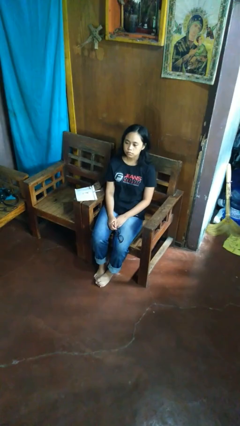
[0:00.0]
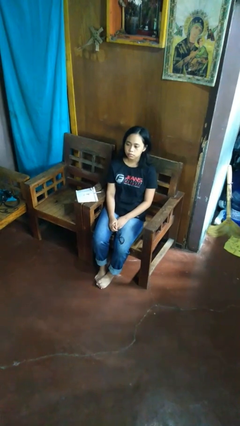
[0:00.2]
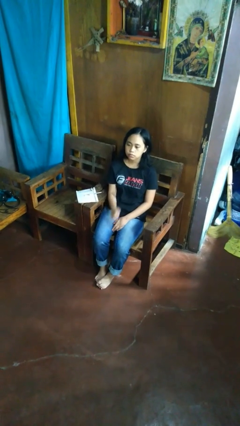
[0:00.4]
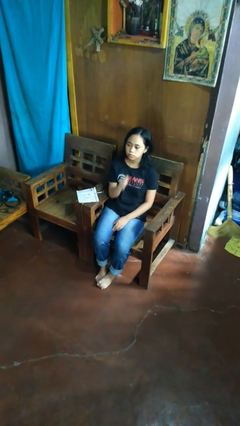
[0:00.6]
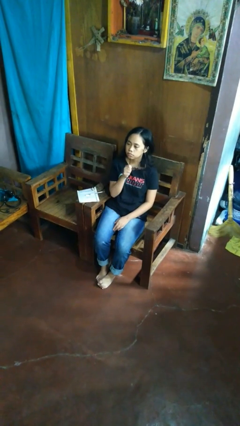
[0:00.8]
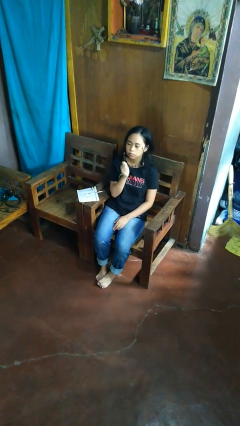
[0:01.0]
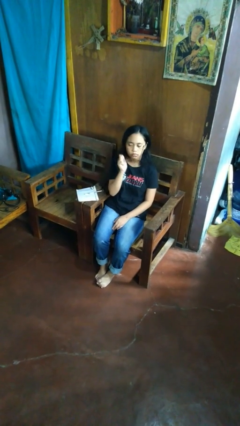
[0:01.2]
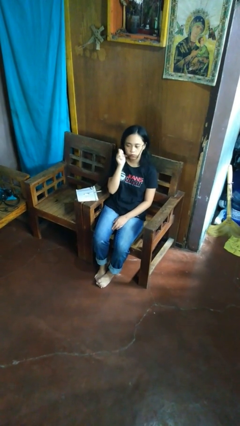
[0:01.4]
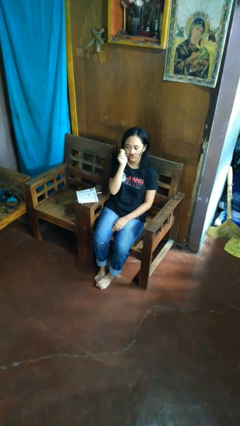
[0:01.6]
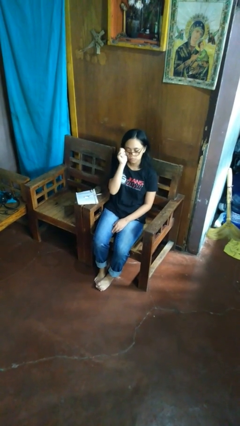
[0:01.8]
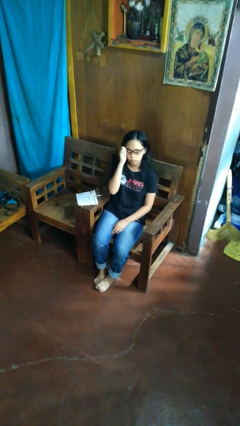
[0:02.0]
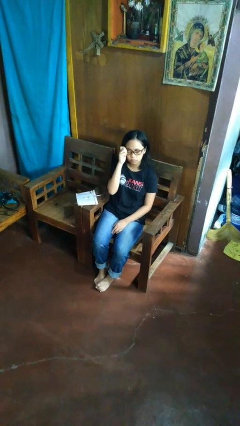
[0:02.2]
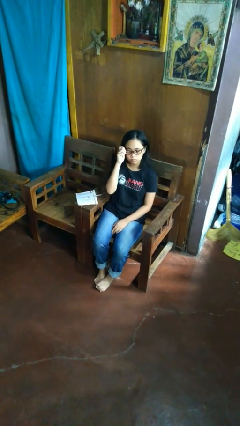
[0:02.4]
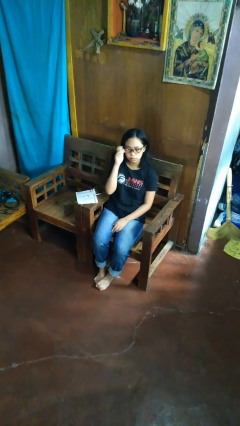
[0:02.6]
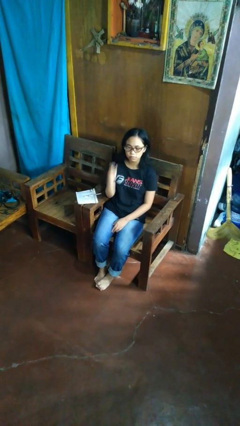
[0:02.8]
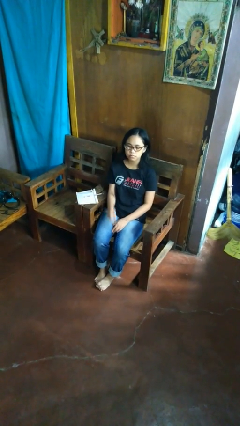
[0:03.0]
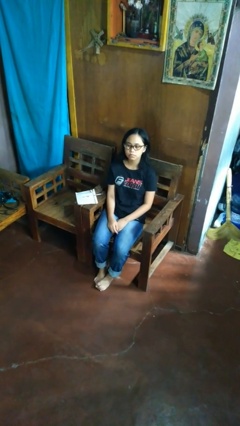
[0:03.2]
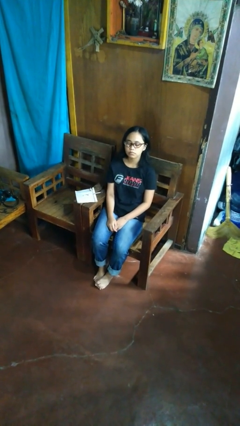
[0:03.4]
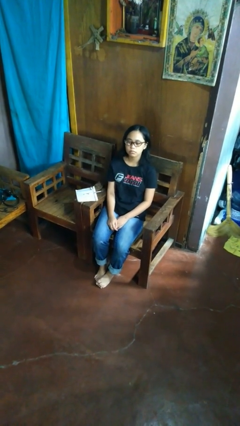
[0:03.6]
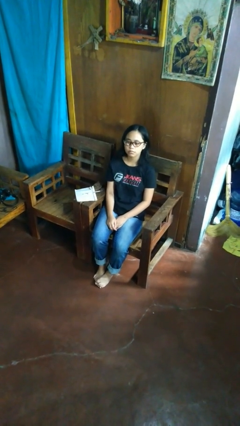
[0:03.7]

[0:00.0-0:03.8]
person puts on glasses

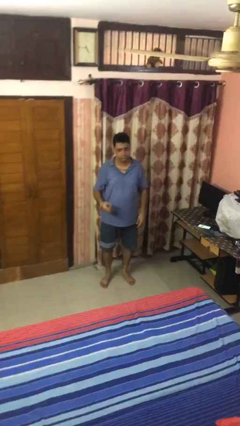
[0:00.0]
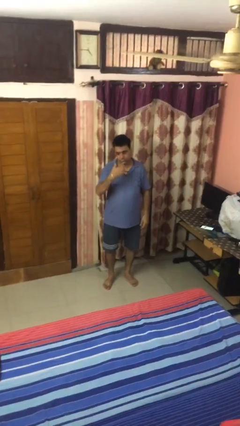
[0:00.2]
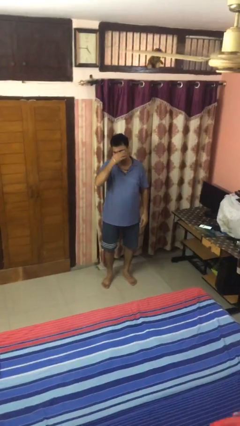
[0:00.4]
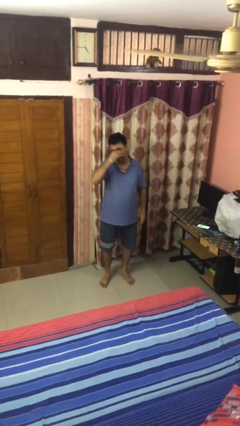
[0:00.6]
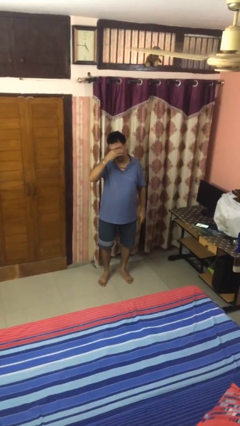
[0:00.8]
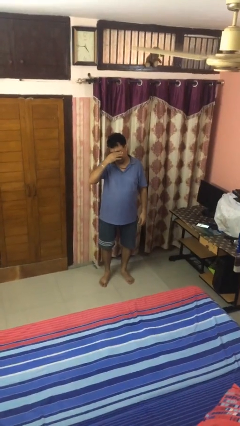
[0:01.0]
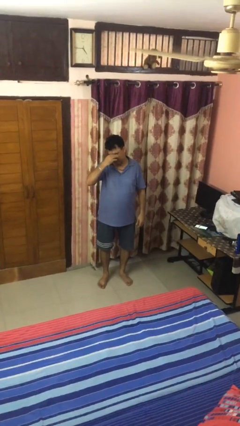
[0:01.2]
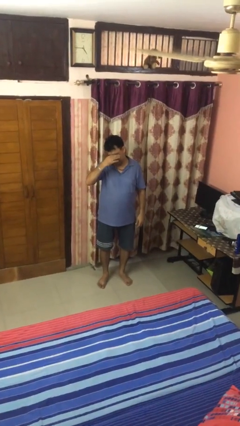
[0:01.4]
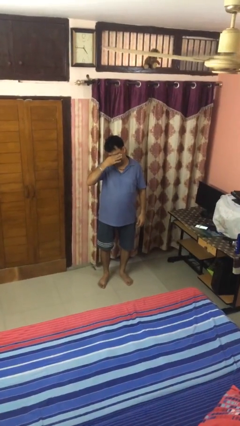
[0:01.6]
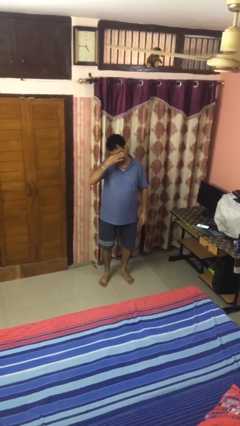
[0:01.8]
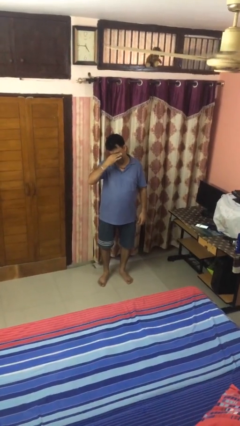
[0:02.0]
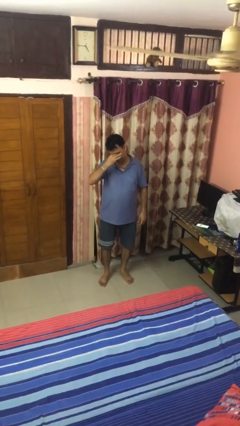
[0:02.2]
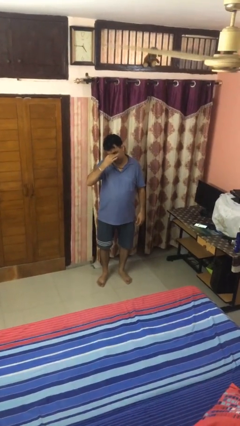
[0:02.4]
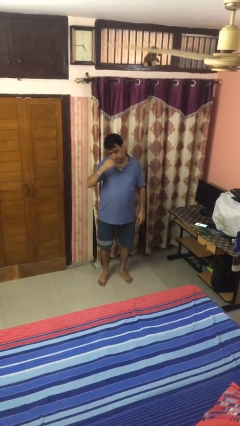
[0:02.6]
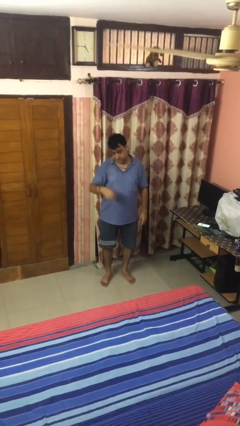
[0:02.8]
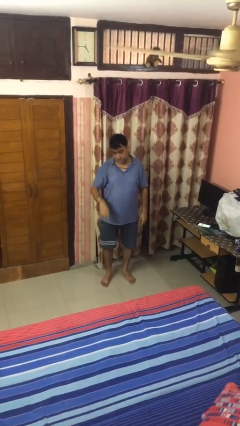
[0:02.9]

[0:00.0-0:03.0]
person rubs eyes

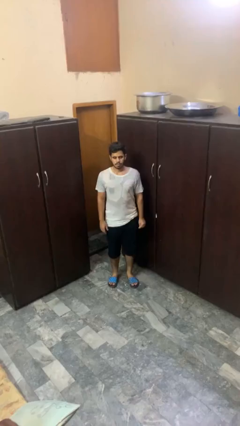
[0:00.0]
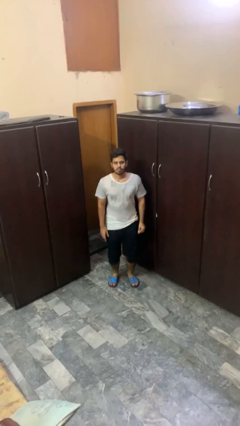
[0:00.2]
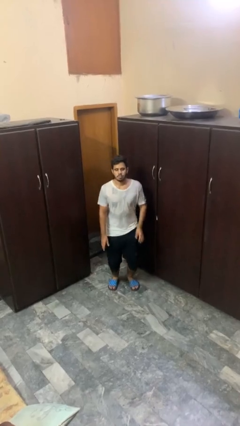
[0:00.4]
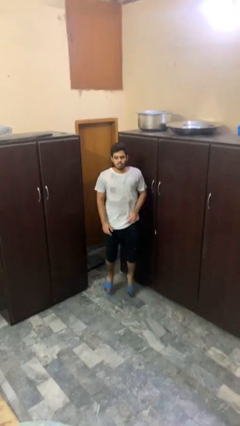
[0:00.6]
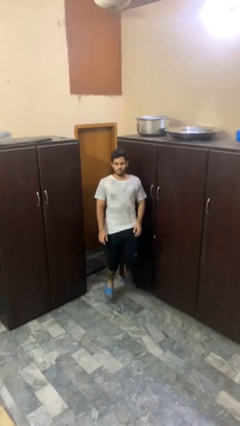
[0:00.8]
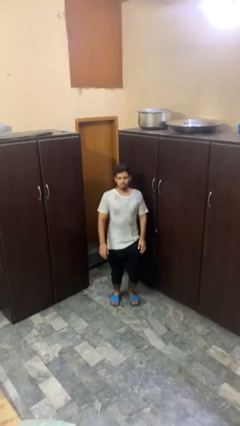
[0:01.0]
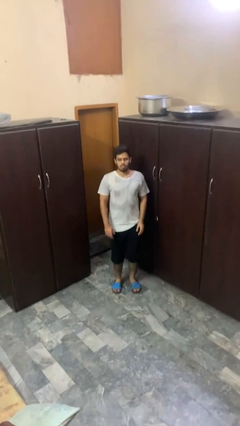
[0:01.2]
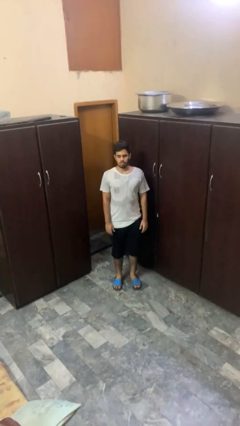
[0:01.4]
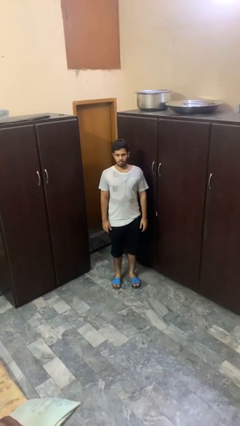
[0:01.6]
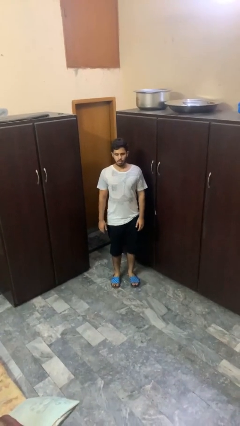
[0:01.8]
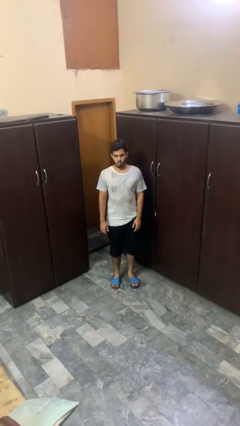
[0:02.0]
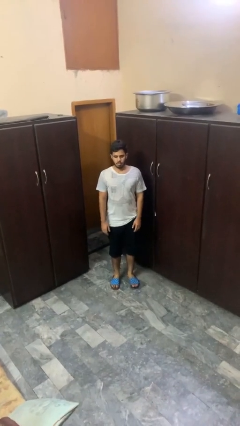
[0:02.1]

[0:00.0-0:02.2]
person jumps

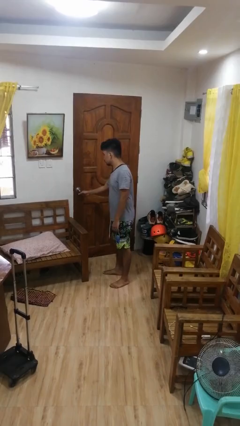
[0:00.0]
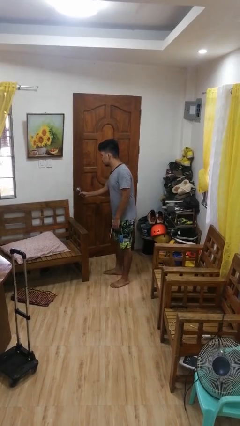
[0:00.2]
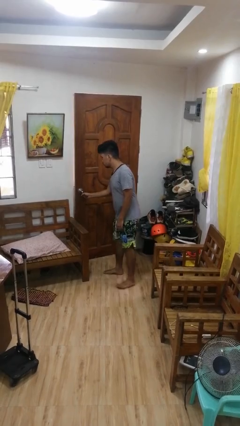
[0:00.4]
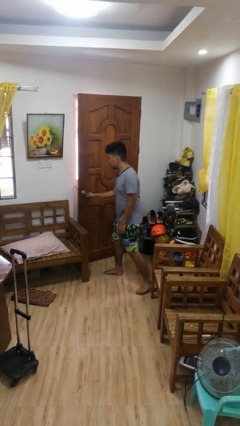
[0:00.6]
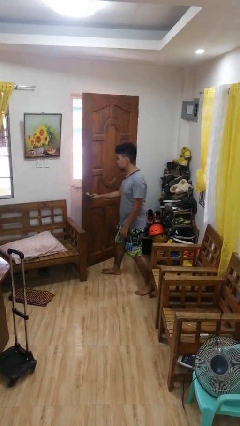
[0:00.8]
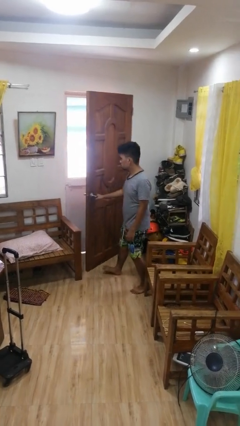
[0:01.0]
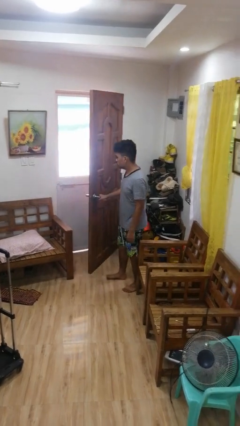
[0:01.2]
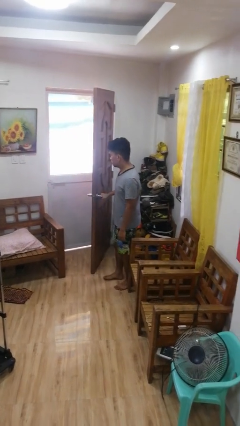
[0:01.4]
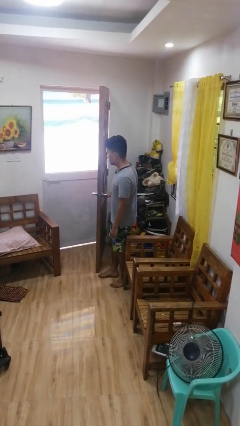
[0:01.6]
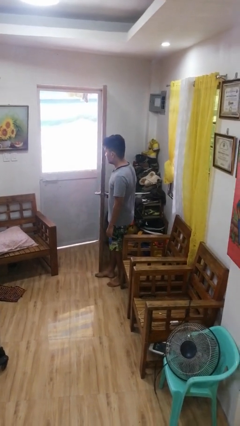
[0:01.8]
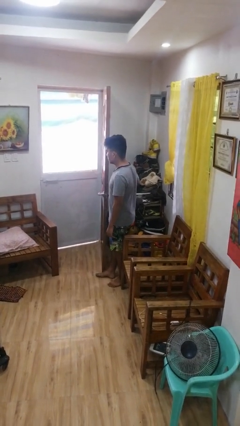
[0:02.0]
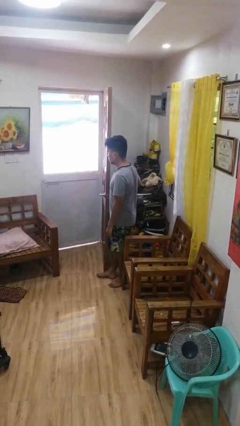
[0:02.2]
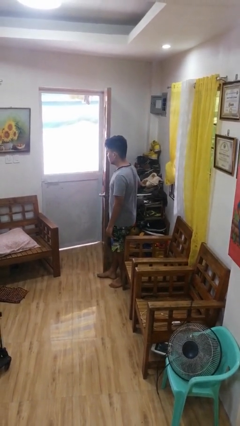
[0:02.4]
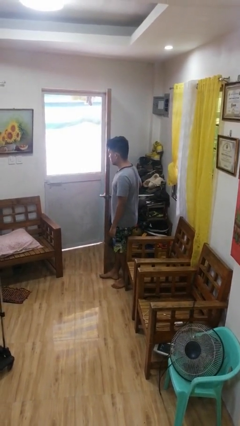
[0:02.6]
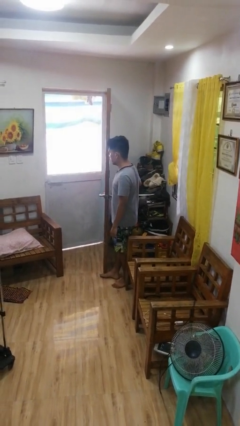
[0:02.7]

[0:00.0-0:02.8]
person opens facility door

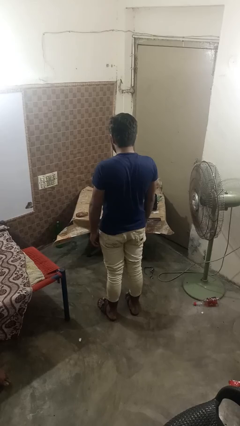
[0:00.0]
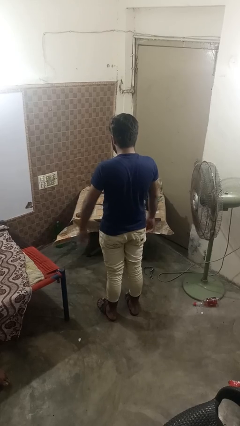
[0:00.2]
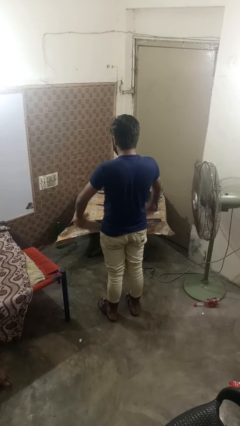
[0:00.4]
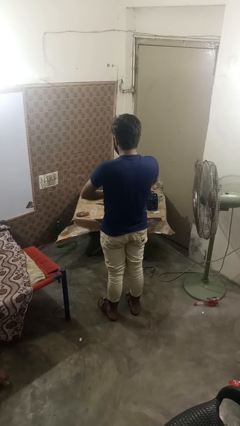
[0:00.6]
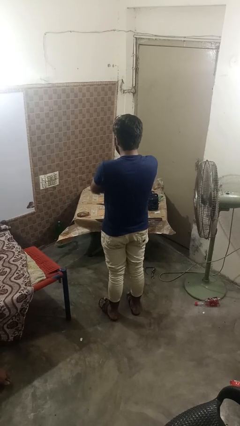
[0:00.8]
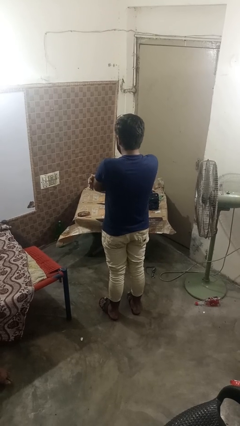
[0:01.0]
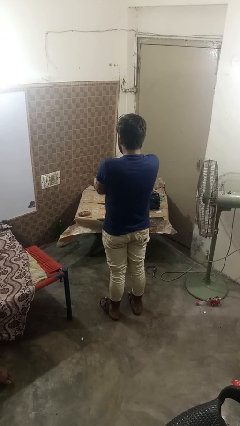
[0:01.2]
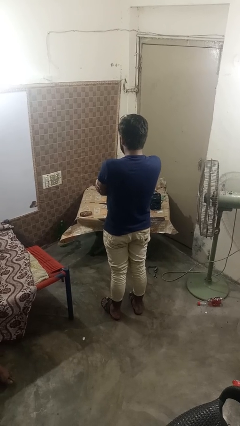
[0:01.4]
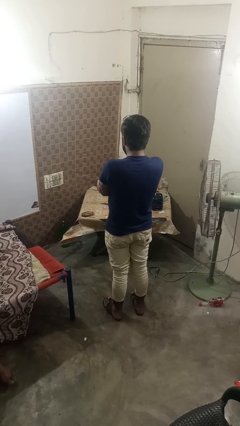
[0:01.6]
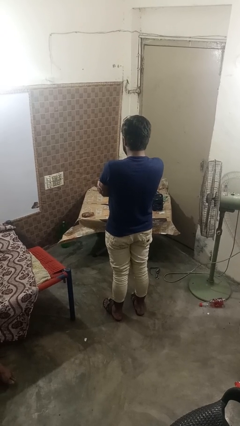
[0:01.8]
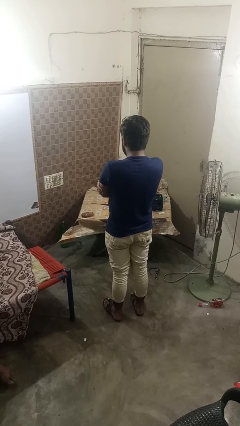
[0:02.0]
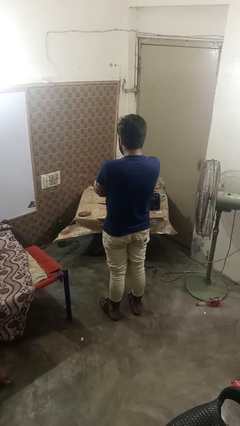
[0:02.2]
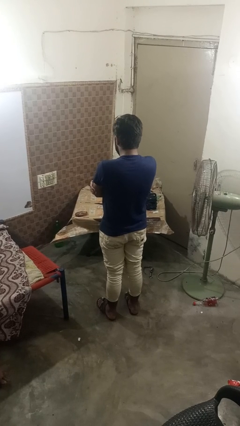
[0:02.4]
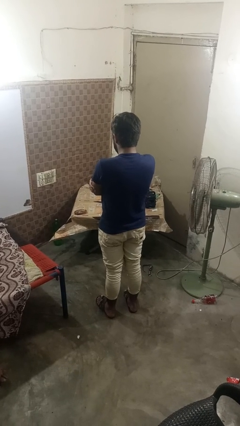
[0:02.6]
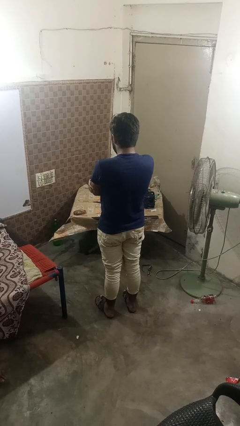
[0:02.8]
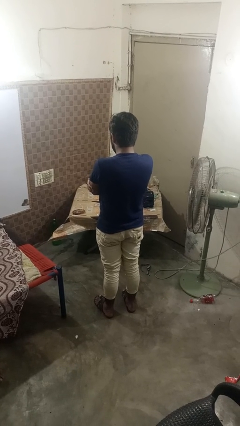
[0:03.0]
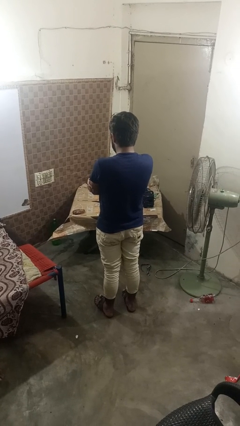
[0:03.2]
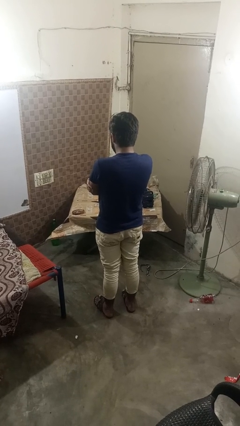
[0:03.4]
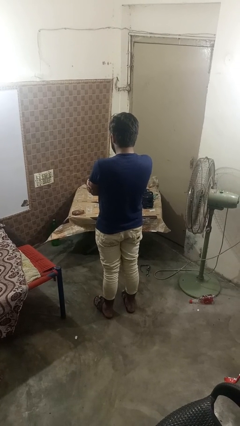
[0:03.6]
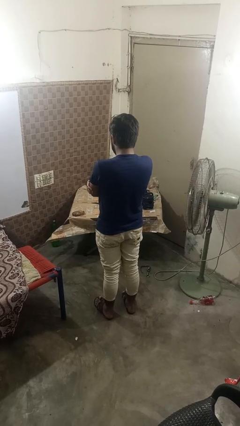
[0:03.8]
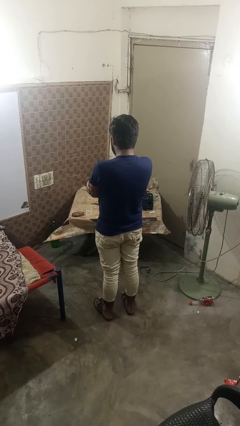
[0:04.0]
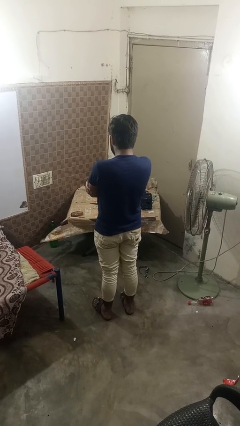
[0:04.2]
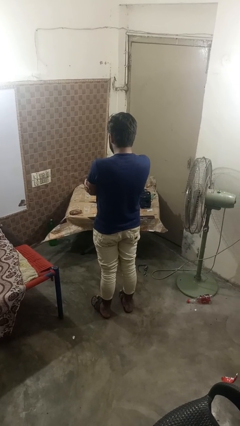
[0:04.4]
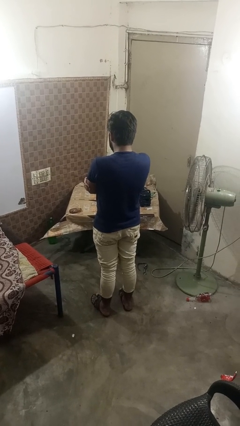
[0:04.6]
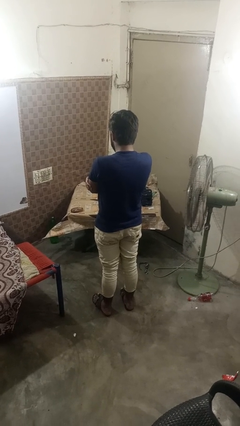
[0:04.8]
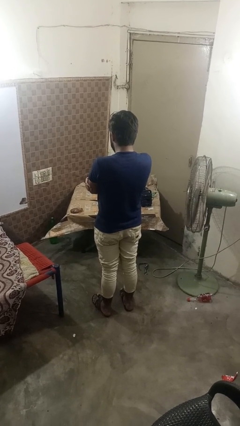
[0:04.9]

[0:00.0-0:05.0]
person crosses arms

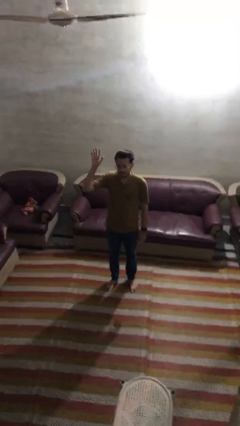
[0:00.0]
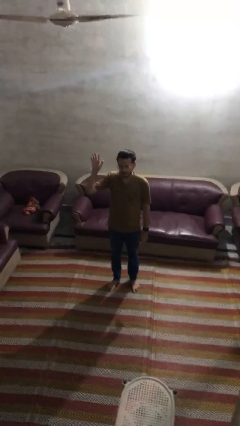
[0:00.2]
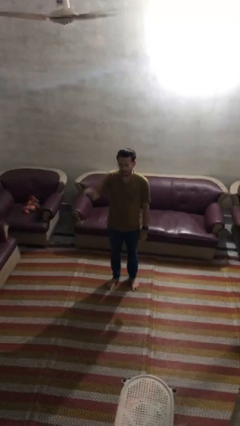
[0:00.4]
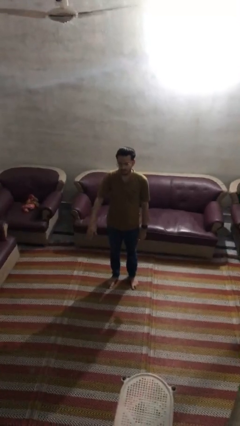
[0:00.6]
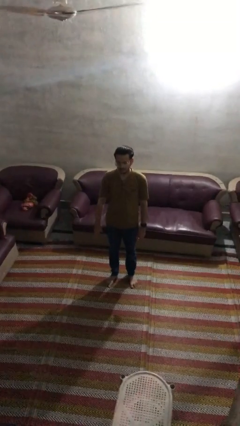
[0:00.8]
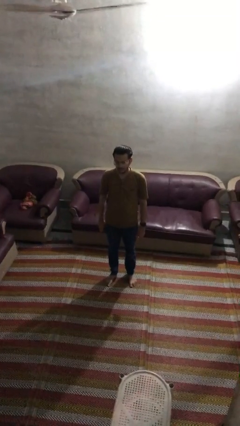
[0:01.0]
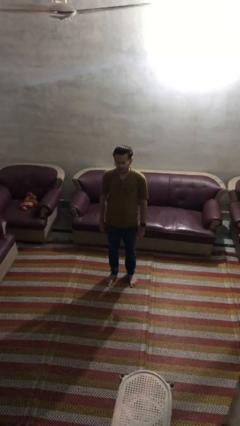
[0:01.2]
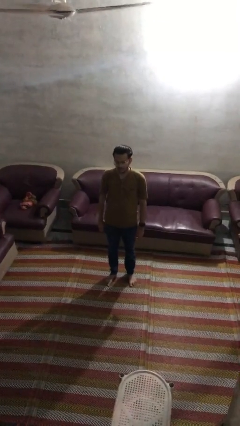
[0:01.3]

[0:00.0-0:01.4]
person gestures lower hand
